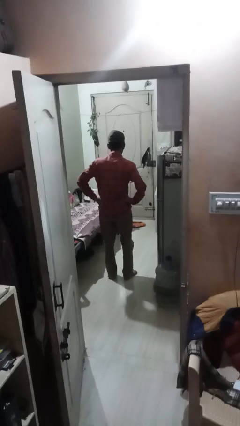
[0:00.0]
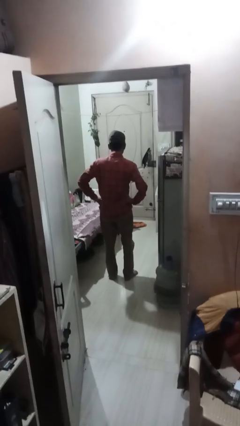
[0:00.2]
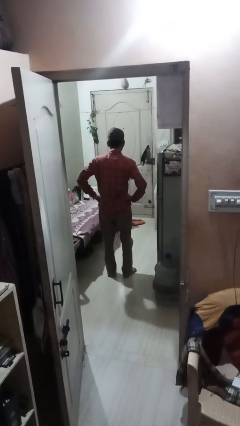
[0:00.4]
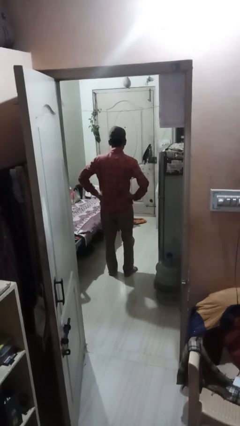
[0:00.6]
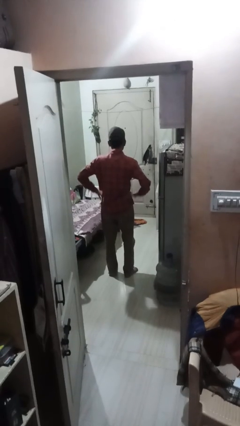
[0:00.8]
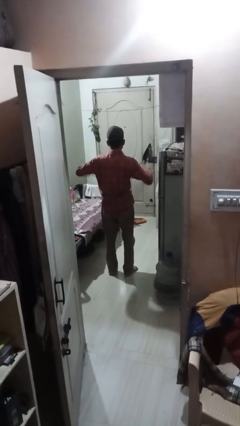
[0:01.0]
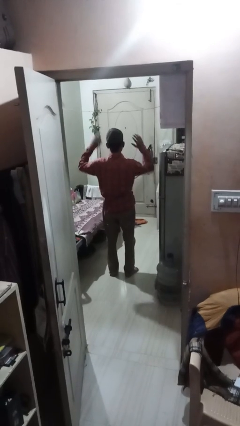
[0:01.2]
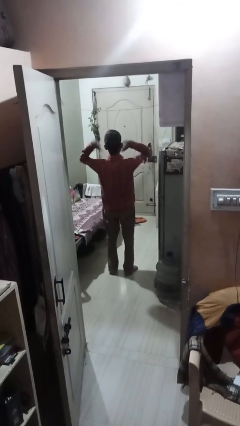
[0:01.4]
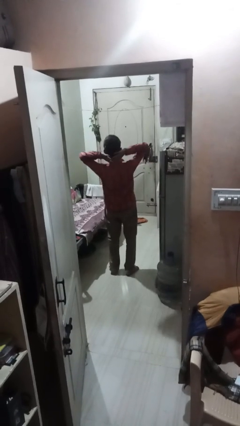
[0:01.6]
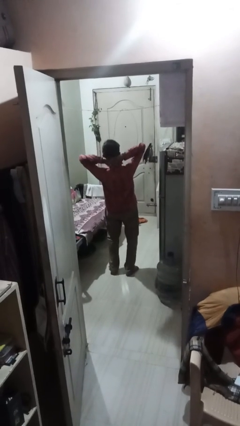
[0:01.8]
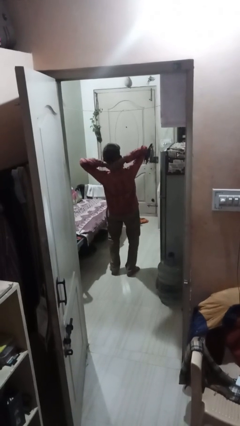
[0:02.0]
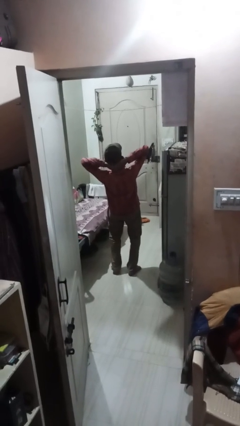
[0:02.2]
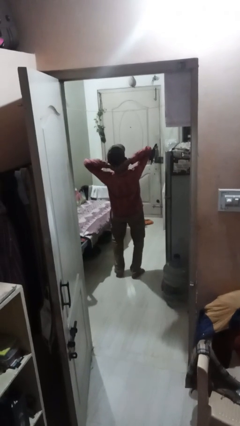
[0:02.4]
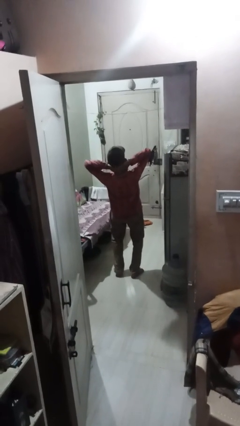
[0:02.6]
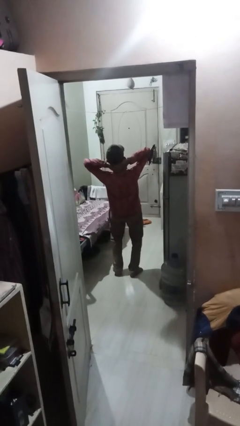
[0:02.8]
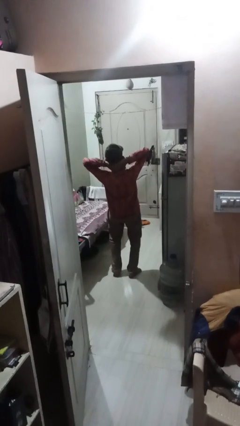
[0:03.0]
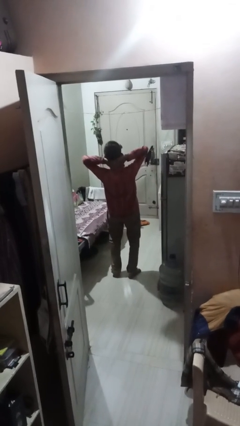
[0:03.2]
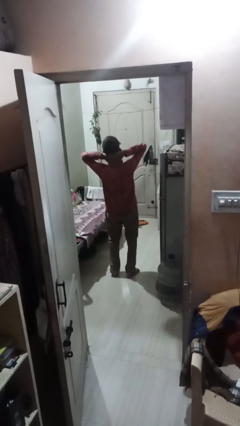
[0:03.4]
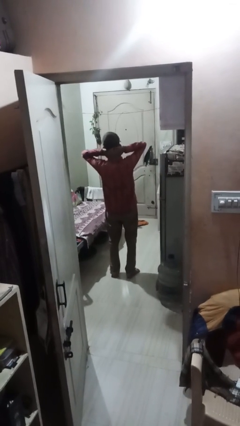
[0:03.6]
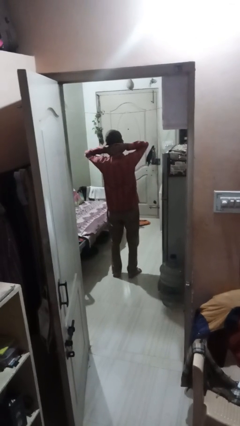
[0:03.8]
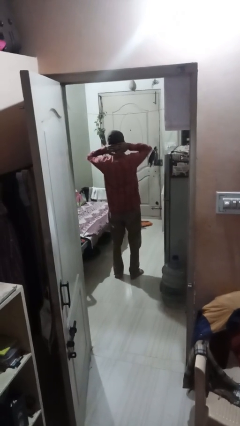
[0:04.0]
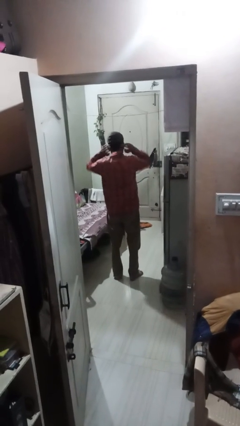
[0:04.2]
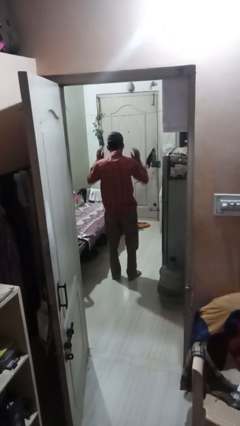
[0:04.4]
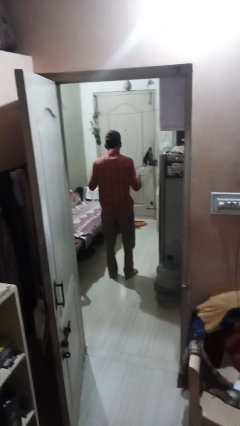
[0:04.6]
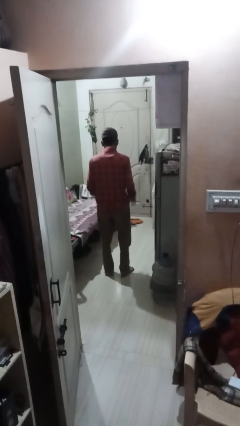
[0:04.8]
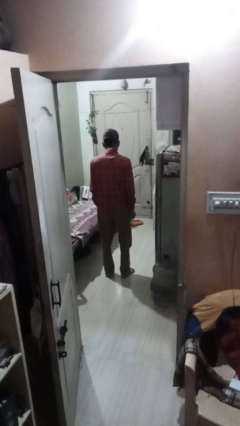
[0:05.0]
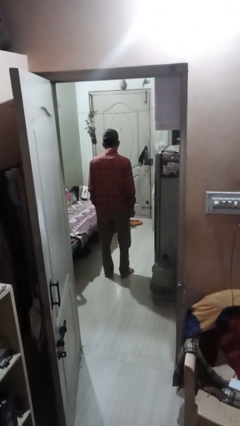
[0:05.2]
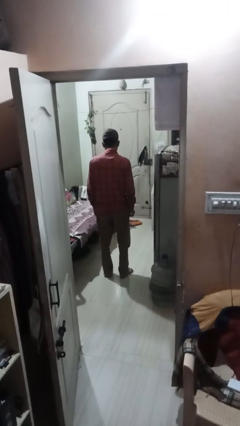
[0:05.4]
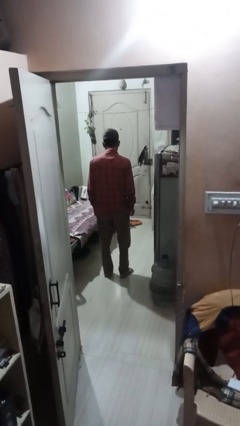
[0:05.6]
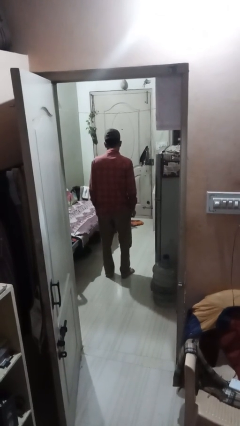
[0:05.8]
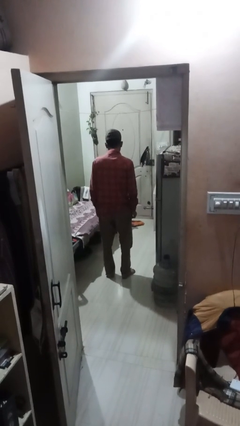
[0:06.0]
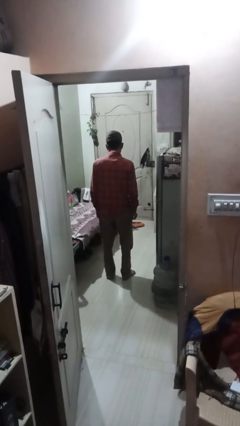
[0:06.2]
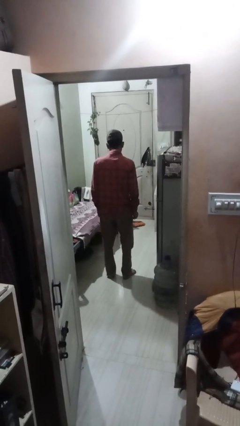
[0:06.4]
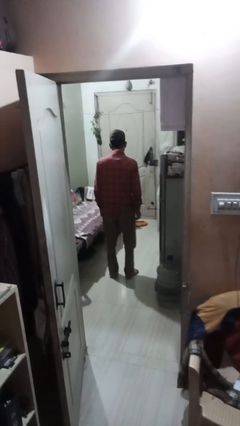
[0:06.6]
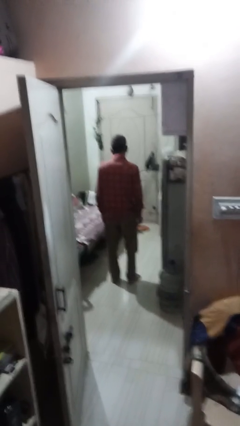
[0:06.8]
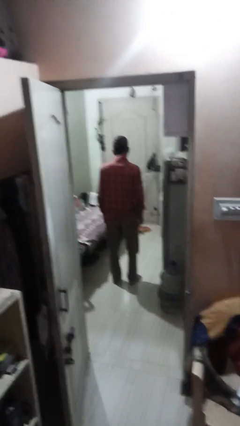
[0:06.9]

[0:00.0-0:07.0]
person stretches arms over head

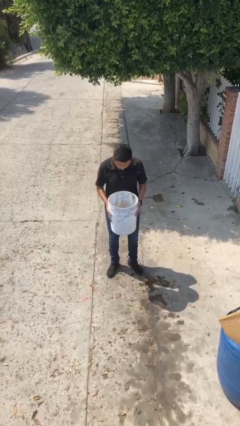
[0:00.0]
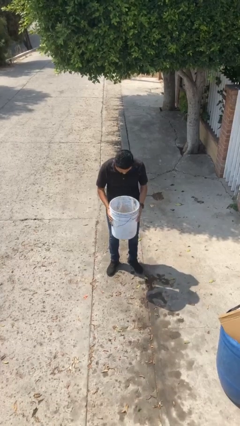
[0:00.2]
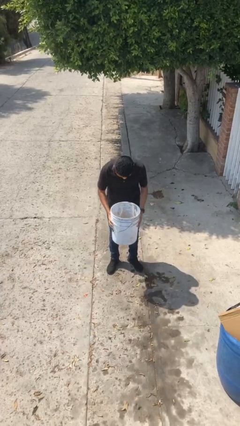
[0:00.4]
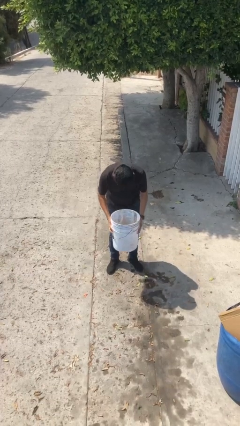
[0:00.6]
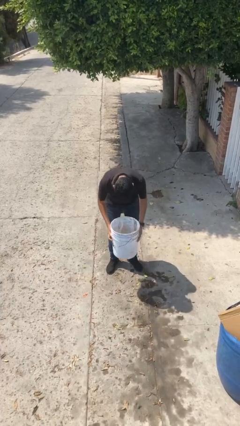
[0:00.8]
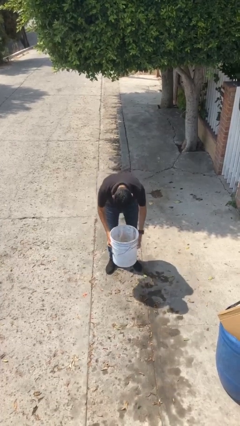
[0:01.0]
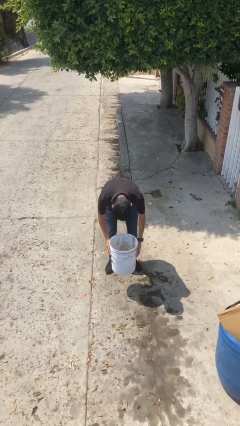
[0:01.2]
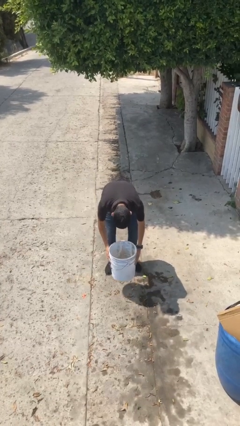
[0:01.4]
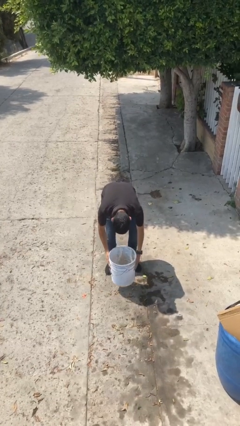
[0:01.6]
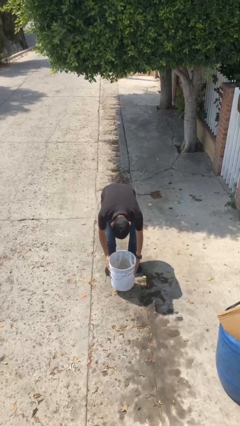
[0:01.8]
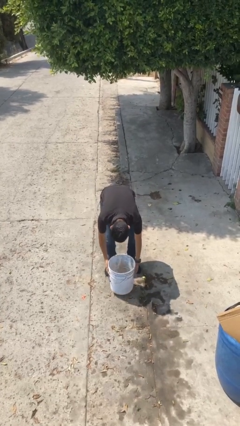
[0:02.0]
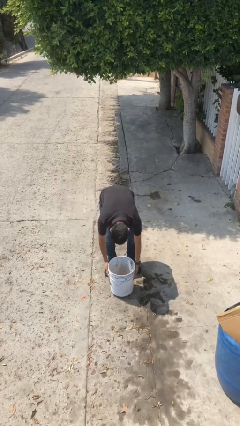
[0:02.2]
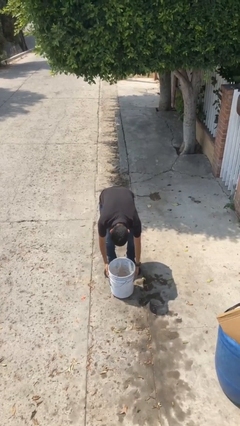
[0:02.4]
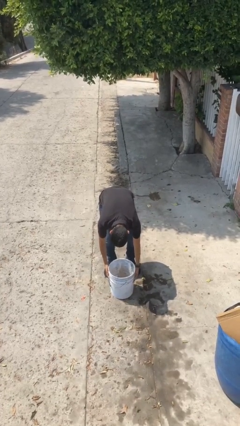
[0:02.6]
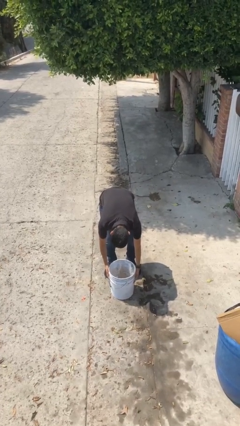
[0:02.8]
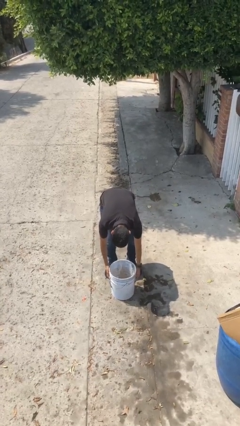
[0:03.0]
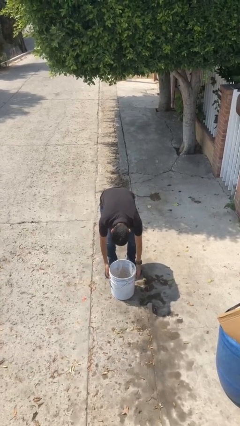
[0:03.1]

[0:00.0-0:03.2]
person puts down object on floor

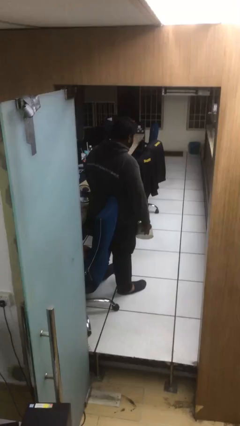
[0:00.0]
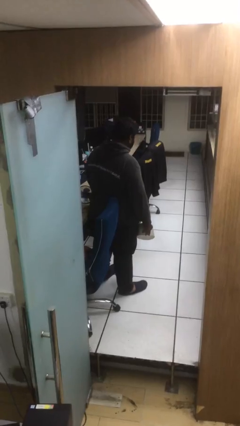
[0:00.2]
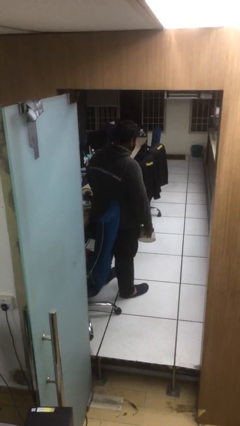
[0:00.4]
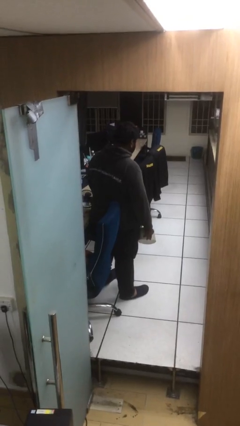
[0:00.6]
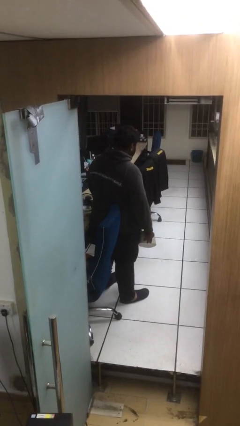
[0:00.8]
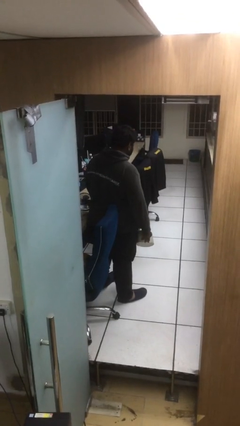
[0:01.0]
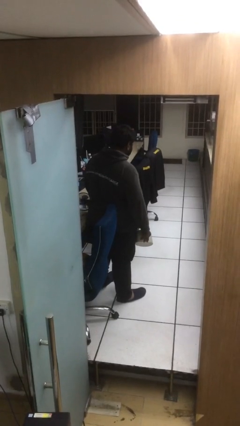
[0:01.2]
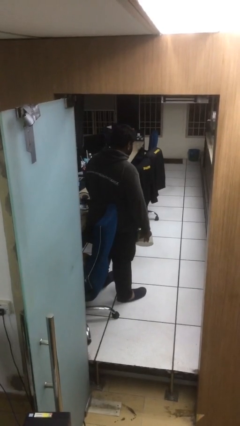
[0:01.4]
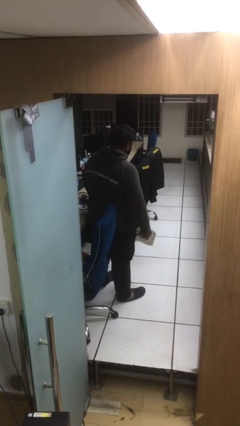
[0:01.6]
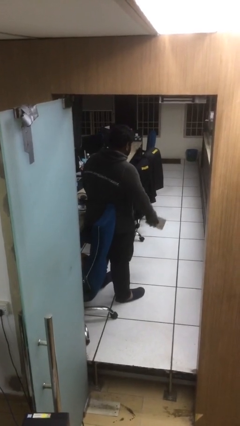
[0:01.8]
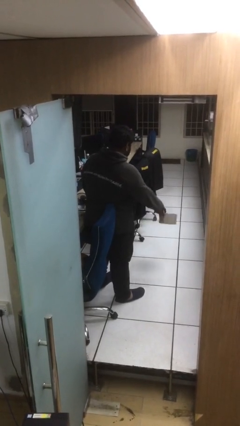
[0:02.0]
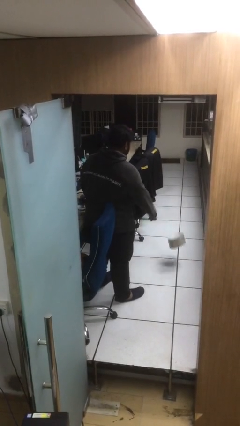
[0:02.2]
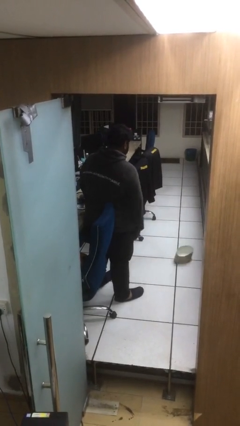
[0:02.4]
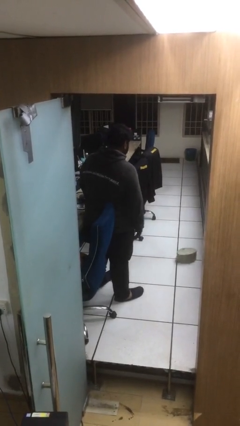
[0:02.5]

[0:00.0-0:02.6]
person throws object to ground

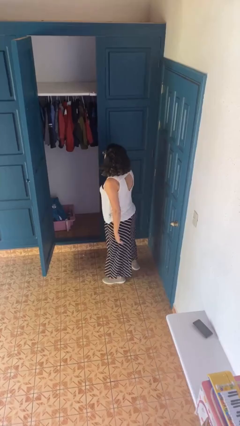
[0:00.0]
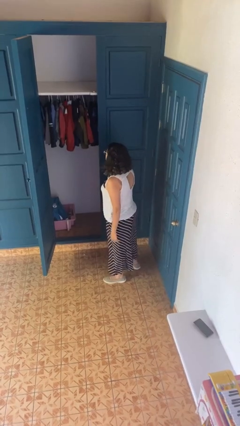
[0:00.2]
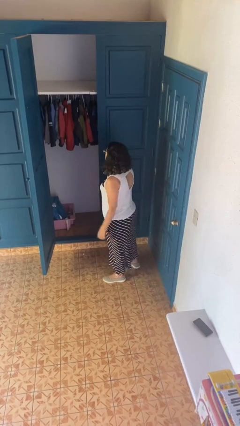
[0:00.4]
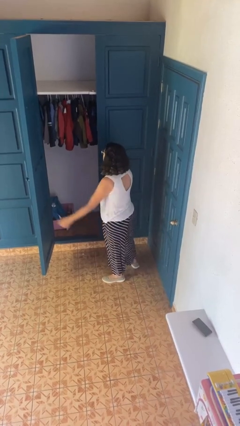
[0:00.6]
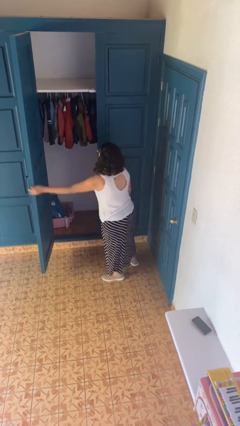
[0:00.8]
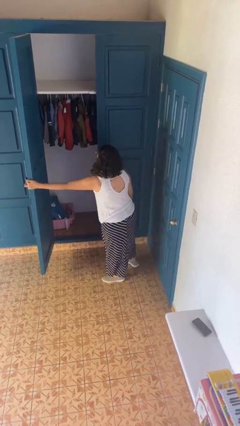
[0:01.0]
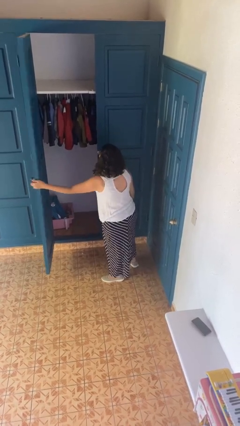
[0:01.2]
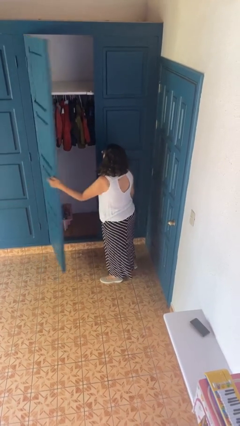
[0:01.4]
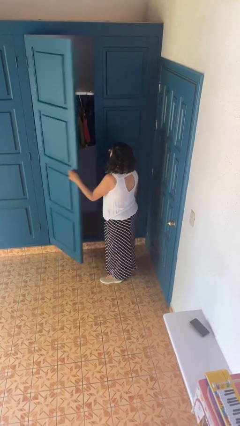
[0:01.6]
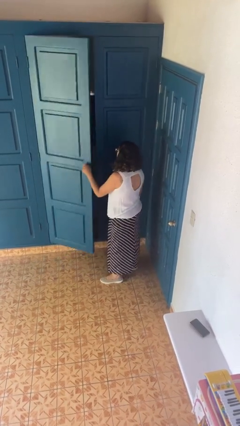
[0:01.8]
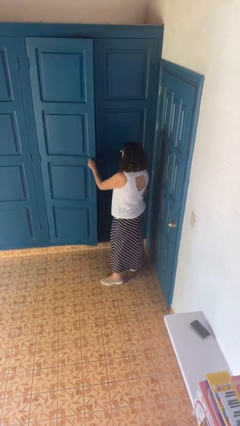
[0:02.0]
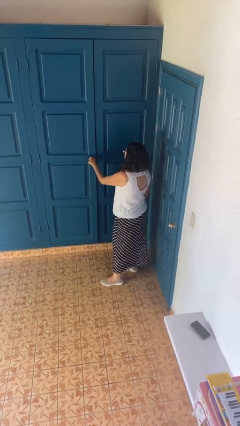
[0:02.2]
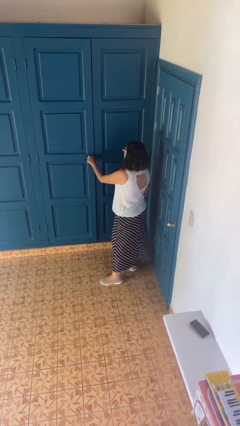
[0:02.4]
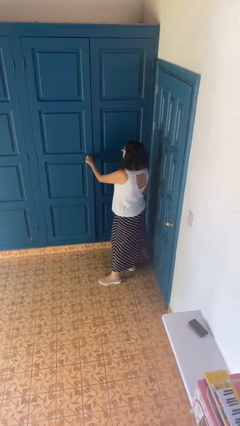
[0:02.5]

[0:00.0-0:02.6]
person closes closet door

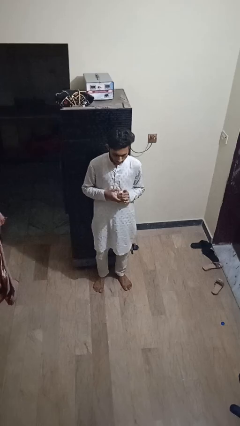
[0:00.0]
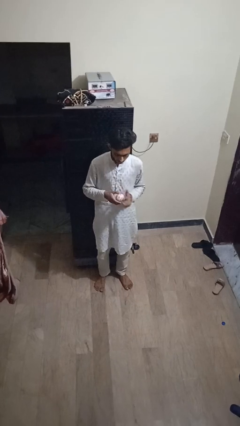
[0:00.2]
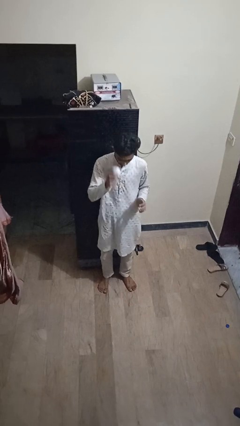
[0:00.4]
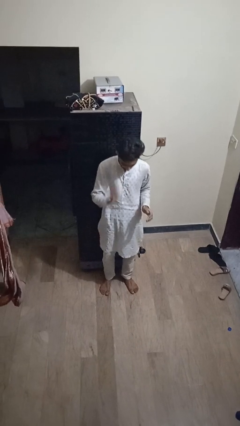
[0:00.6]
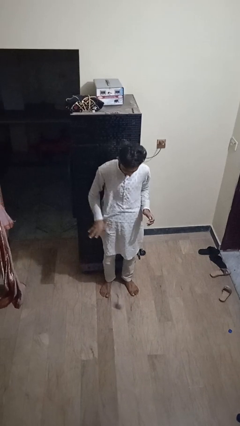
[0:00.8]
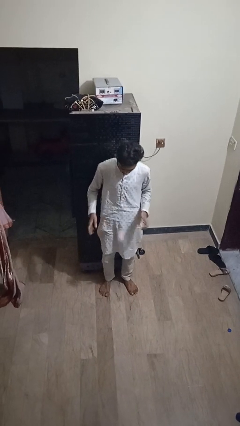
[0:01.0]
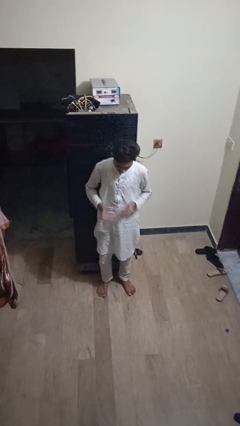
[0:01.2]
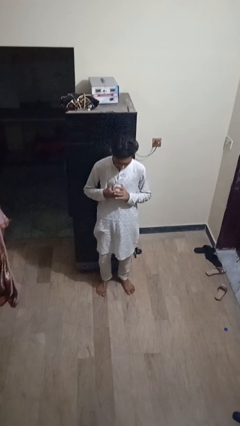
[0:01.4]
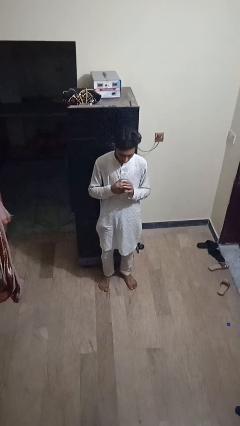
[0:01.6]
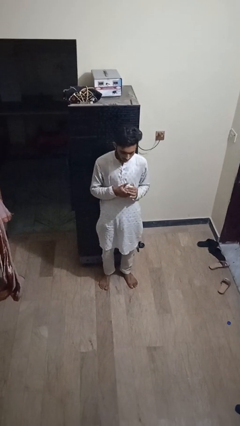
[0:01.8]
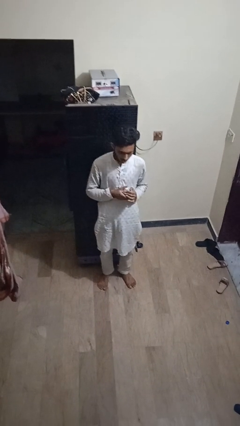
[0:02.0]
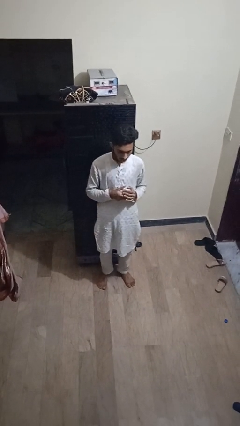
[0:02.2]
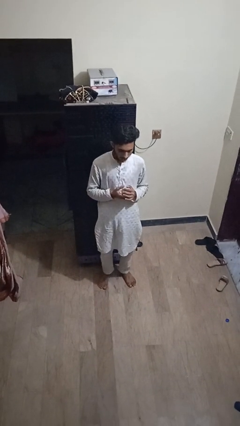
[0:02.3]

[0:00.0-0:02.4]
person bounces ball on floor
